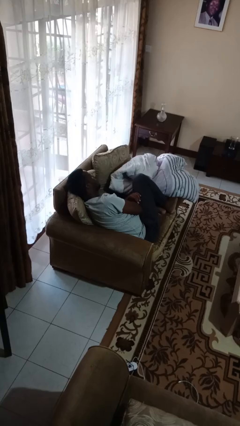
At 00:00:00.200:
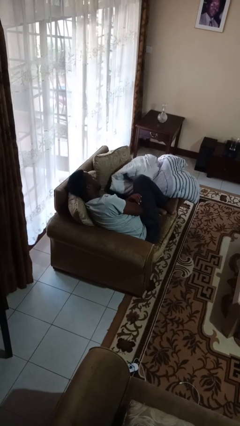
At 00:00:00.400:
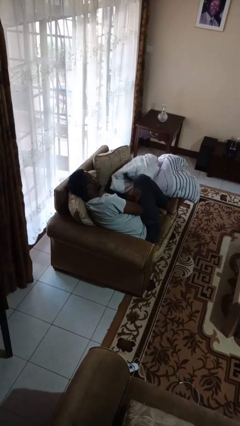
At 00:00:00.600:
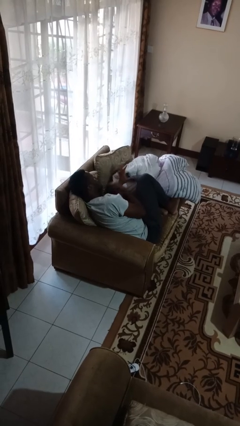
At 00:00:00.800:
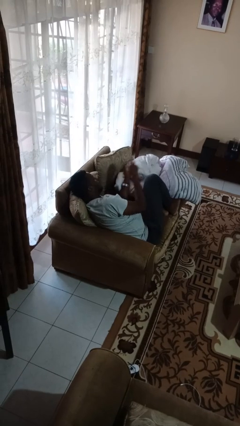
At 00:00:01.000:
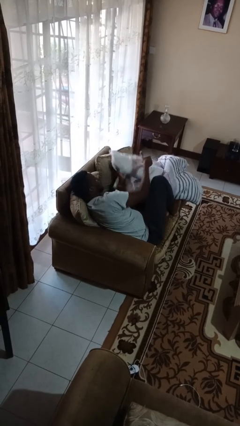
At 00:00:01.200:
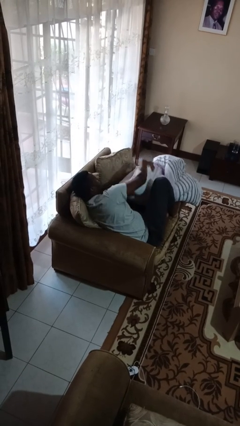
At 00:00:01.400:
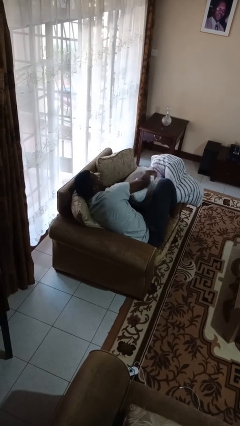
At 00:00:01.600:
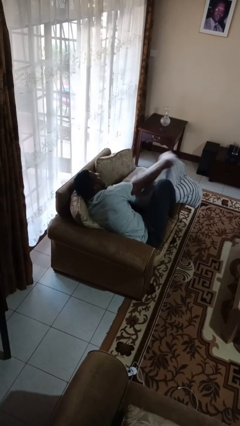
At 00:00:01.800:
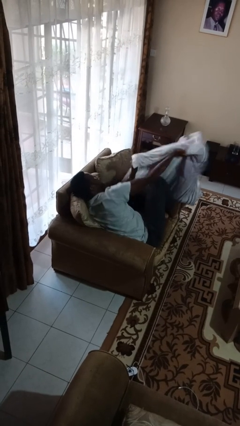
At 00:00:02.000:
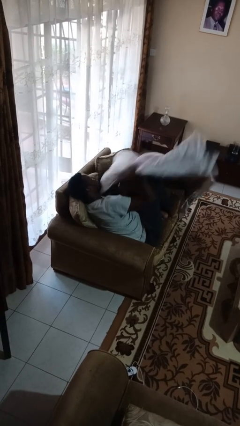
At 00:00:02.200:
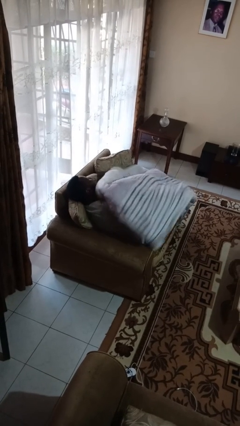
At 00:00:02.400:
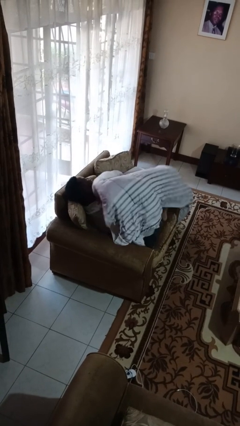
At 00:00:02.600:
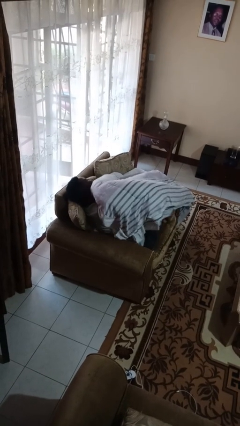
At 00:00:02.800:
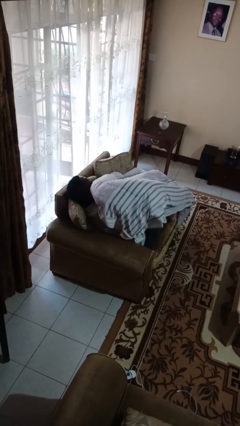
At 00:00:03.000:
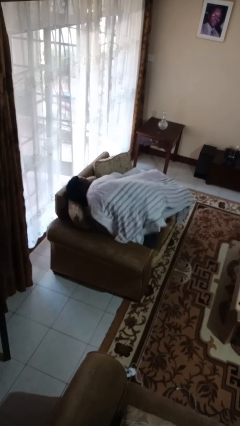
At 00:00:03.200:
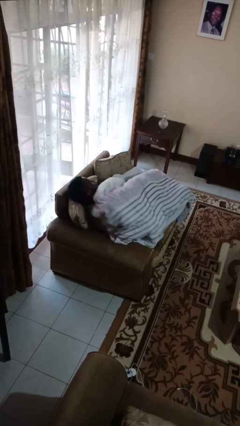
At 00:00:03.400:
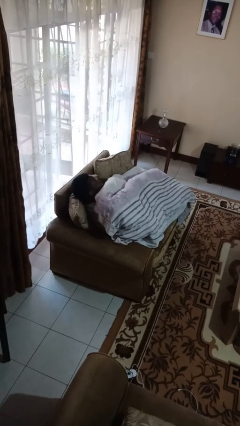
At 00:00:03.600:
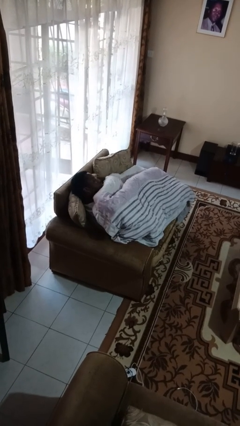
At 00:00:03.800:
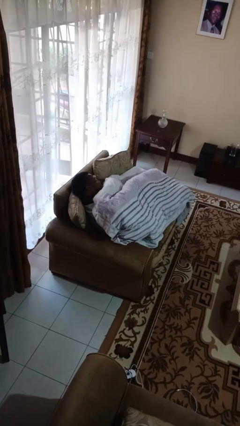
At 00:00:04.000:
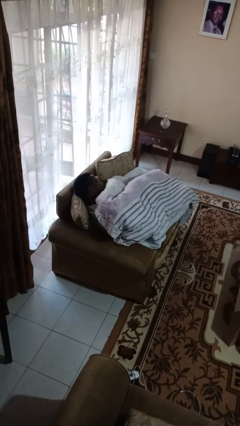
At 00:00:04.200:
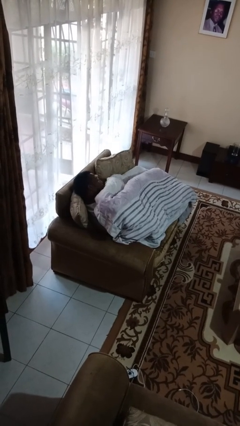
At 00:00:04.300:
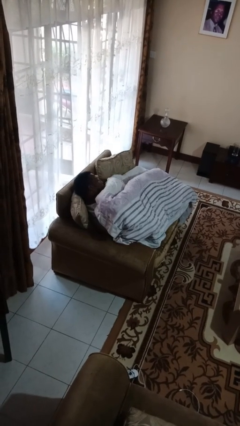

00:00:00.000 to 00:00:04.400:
person covers with blanket

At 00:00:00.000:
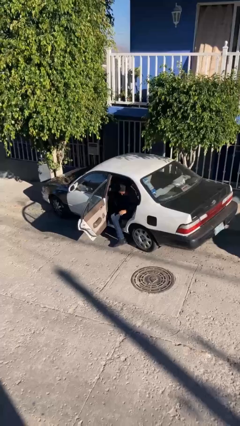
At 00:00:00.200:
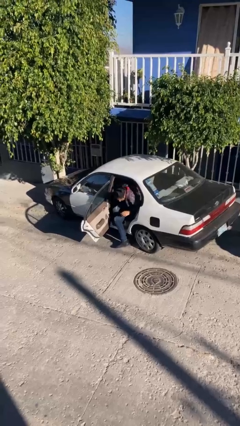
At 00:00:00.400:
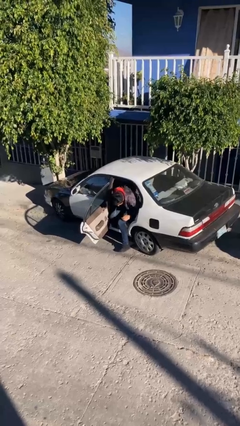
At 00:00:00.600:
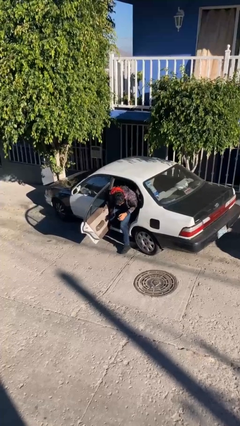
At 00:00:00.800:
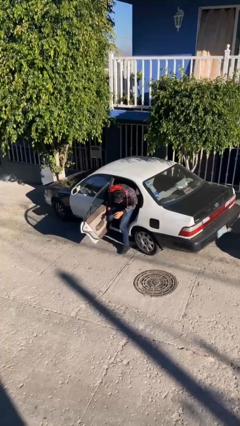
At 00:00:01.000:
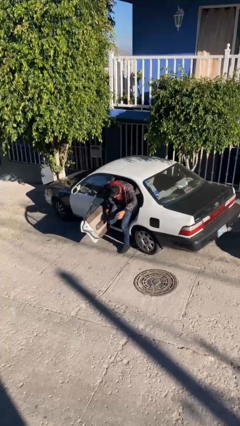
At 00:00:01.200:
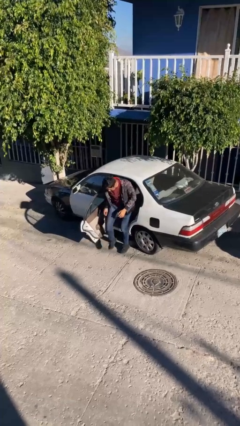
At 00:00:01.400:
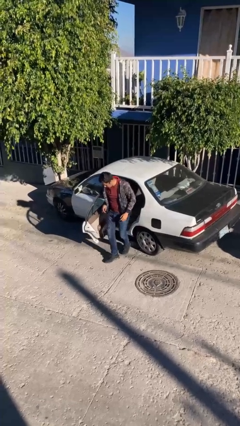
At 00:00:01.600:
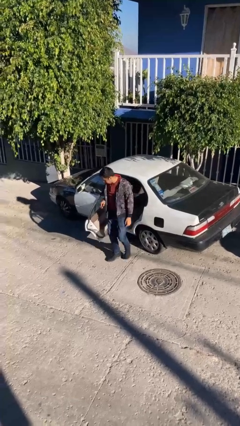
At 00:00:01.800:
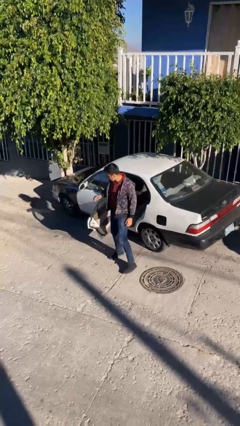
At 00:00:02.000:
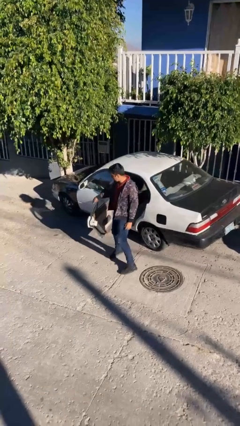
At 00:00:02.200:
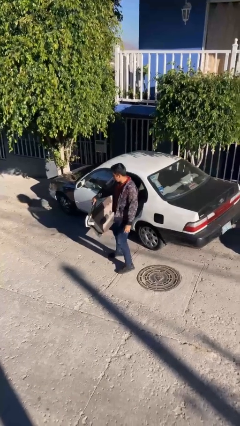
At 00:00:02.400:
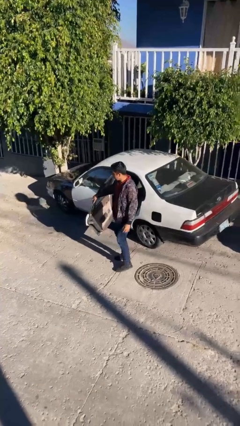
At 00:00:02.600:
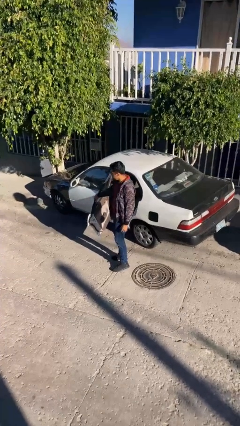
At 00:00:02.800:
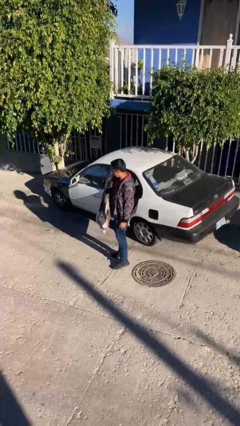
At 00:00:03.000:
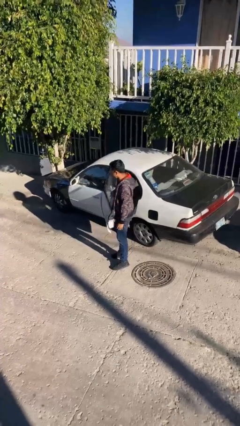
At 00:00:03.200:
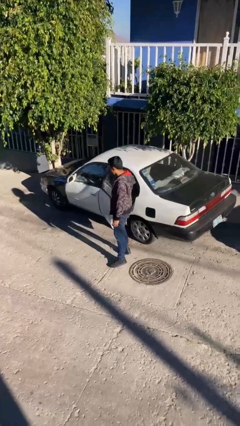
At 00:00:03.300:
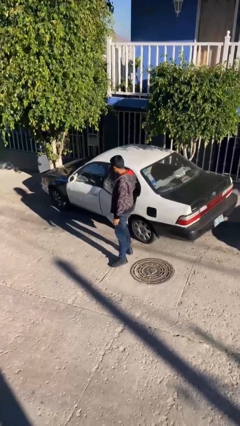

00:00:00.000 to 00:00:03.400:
person exits car

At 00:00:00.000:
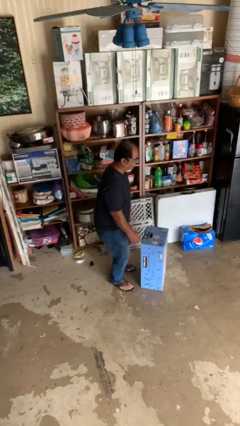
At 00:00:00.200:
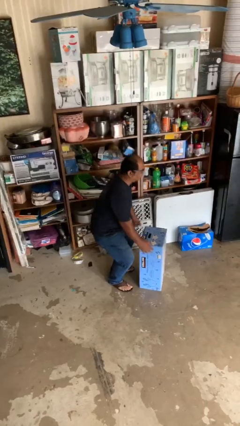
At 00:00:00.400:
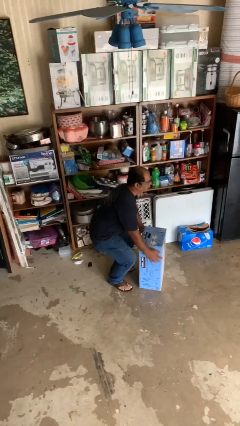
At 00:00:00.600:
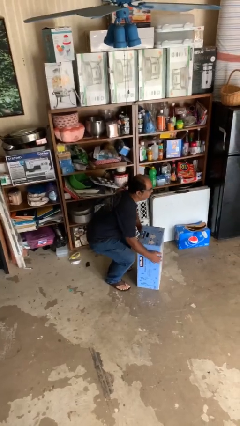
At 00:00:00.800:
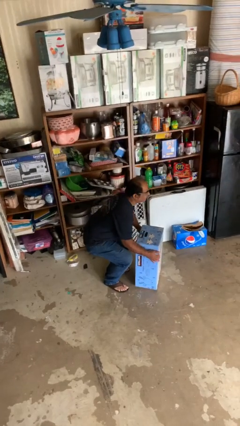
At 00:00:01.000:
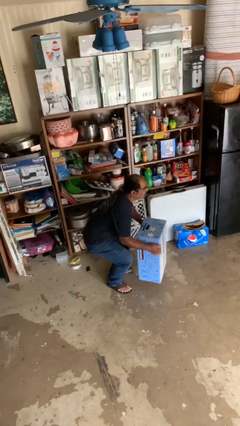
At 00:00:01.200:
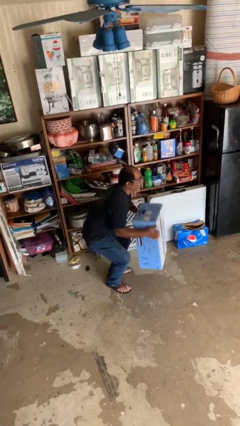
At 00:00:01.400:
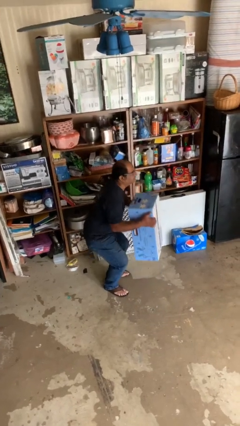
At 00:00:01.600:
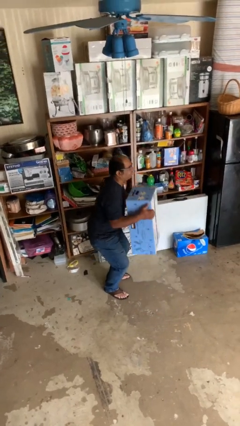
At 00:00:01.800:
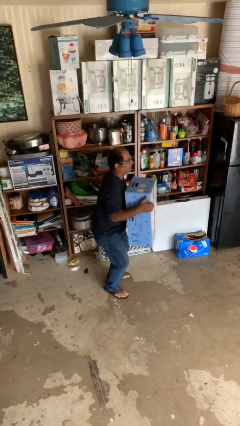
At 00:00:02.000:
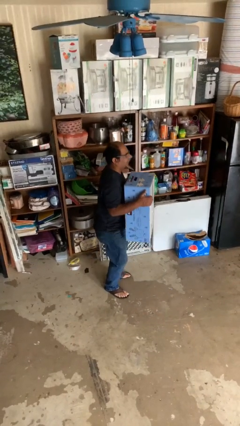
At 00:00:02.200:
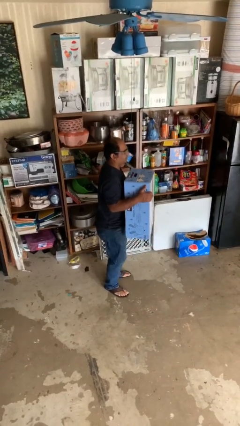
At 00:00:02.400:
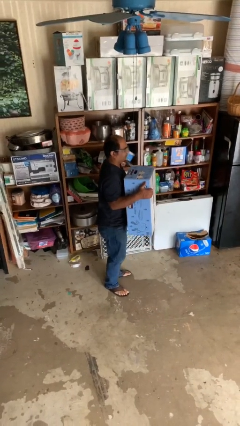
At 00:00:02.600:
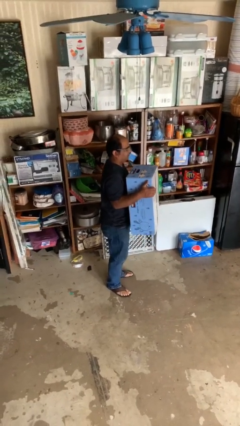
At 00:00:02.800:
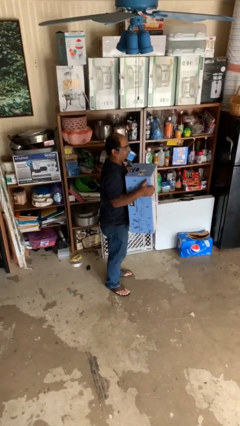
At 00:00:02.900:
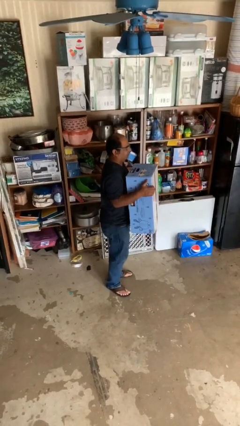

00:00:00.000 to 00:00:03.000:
person picks up object from floor

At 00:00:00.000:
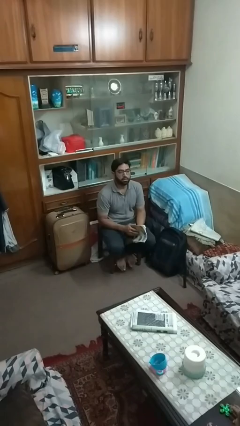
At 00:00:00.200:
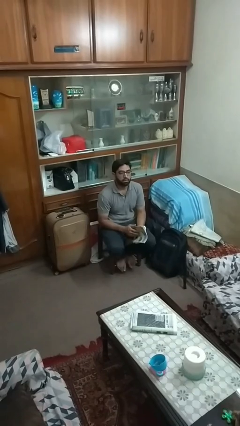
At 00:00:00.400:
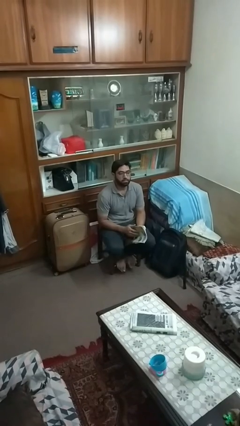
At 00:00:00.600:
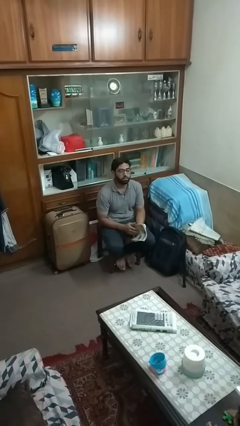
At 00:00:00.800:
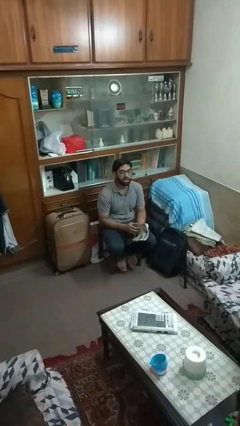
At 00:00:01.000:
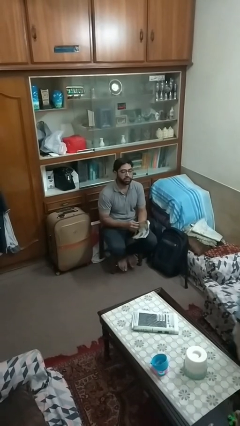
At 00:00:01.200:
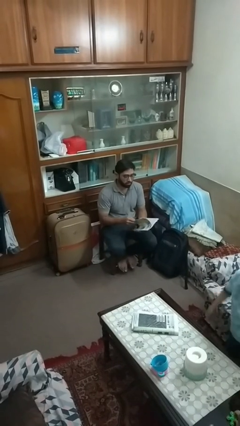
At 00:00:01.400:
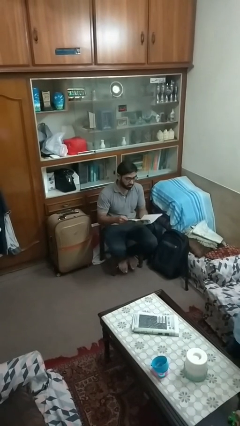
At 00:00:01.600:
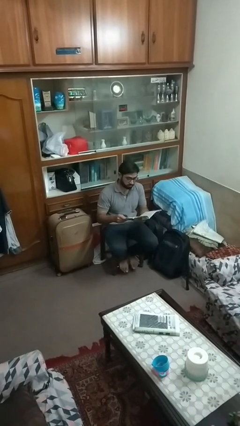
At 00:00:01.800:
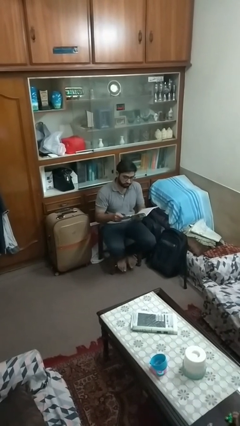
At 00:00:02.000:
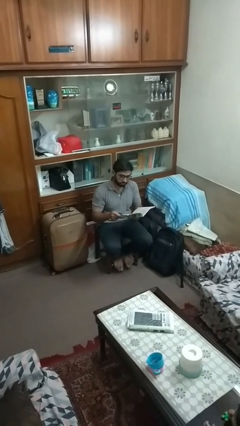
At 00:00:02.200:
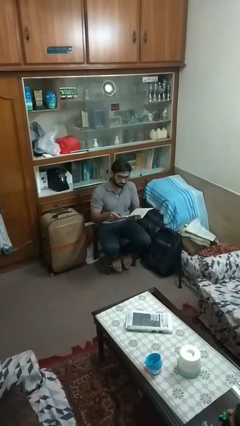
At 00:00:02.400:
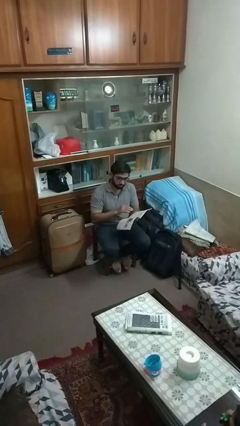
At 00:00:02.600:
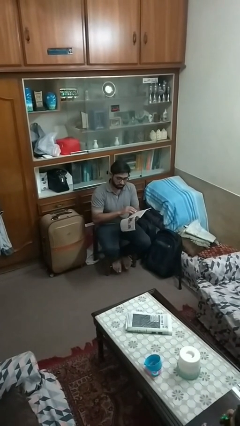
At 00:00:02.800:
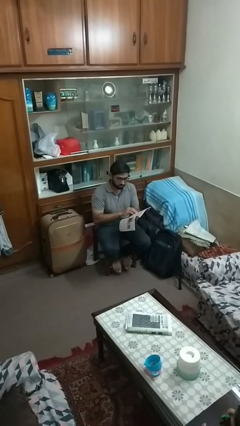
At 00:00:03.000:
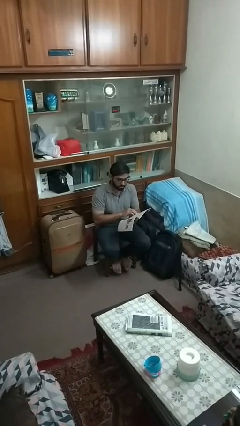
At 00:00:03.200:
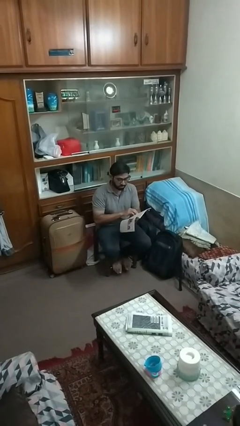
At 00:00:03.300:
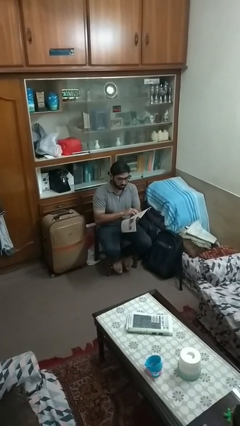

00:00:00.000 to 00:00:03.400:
person reads magazine

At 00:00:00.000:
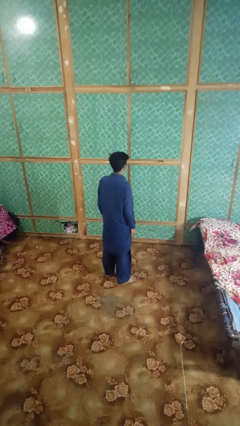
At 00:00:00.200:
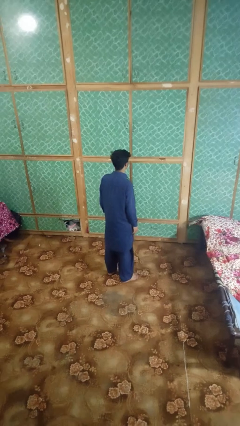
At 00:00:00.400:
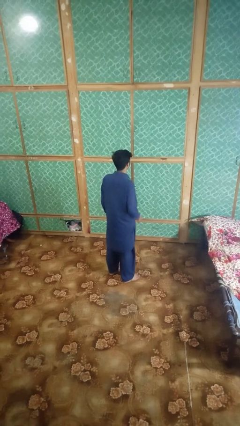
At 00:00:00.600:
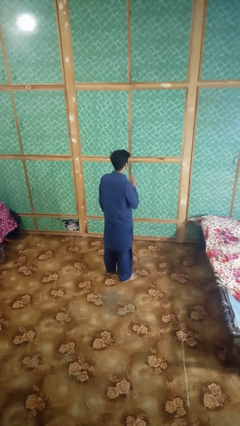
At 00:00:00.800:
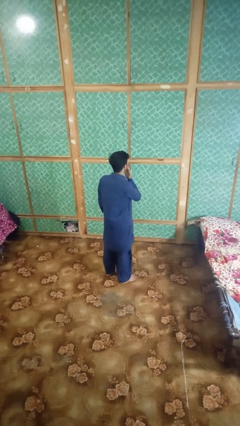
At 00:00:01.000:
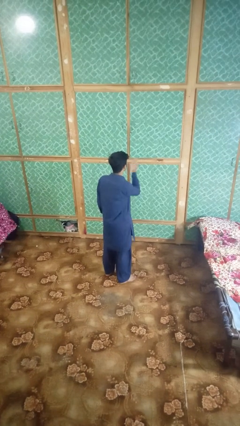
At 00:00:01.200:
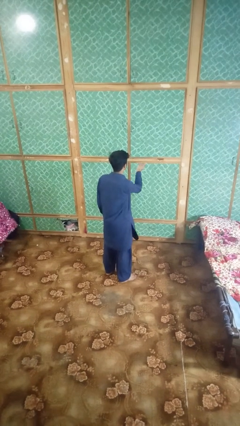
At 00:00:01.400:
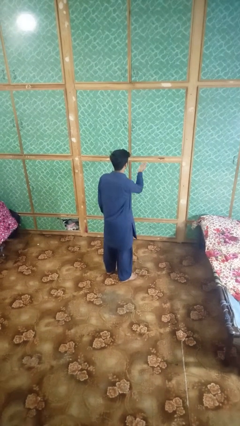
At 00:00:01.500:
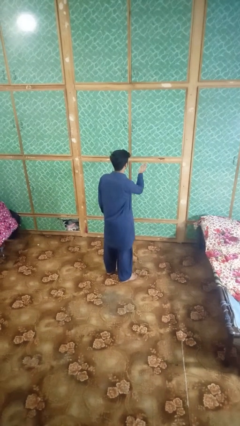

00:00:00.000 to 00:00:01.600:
person gestures blow kiss

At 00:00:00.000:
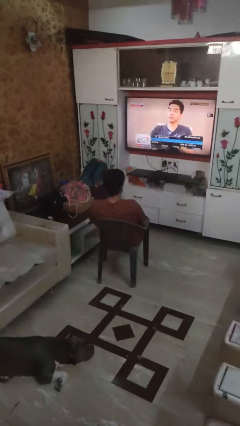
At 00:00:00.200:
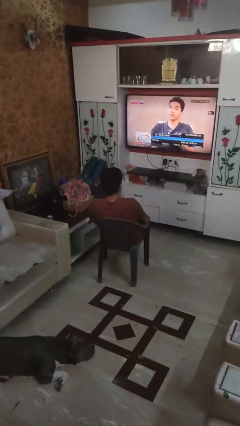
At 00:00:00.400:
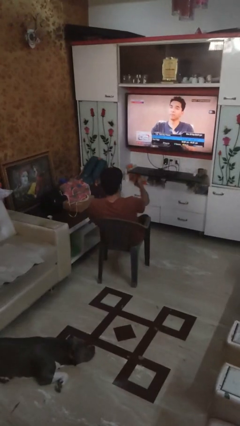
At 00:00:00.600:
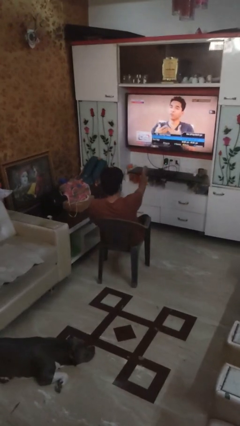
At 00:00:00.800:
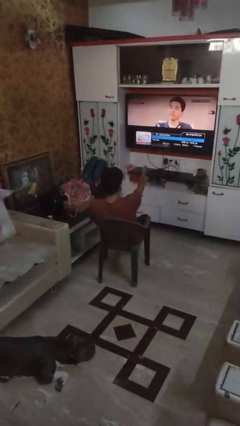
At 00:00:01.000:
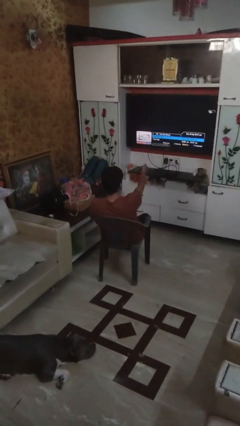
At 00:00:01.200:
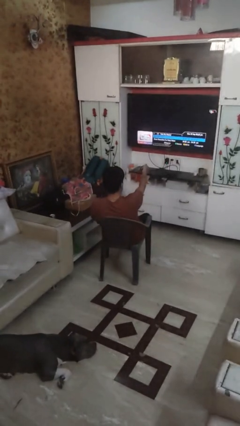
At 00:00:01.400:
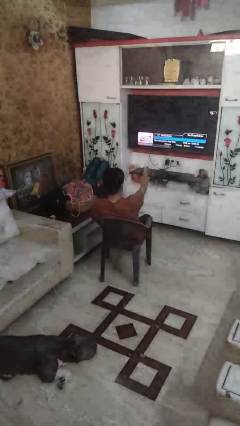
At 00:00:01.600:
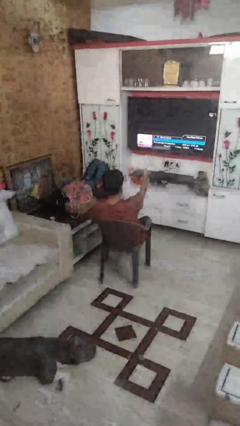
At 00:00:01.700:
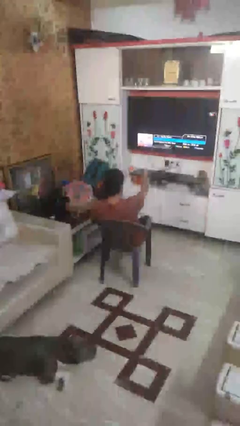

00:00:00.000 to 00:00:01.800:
person uses television remote
